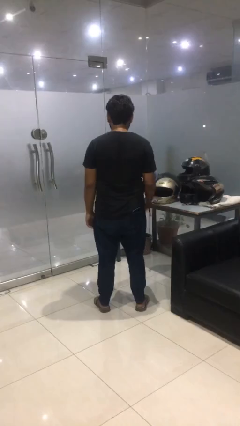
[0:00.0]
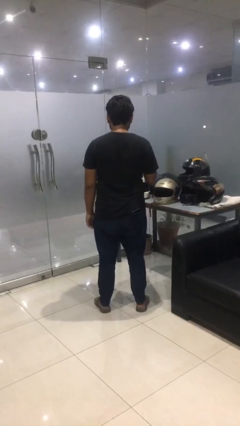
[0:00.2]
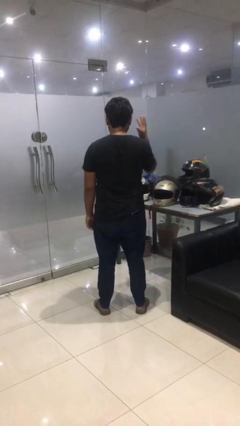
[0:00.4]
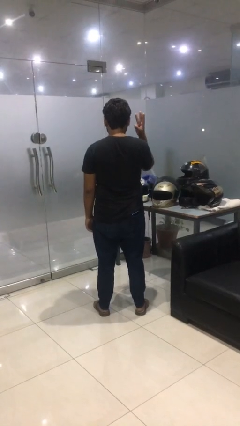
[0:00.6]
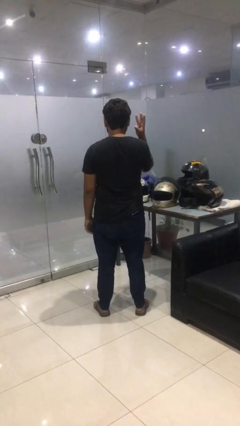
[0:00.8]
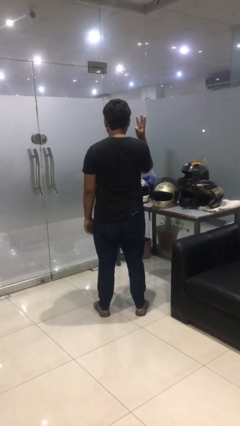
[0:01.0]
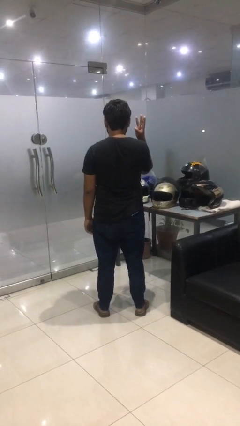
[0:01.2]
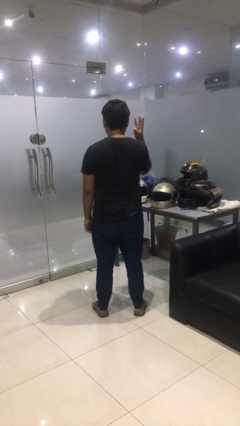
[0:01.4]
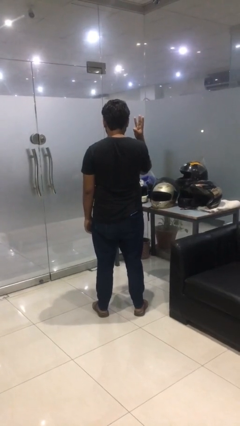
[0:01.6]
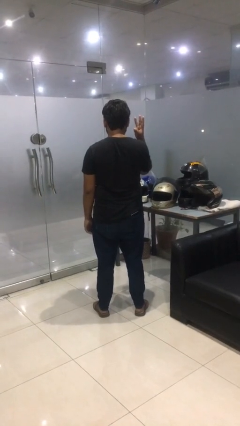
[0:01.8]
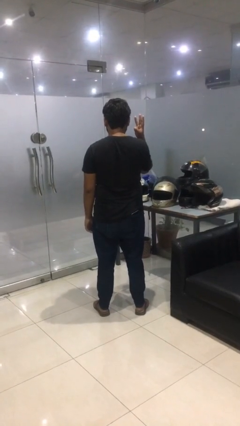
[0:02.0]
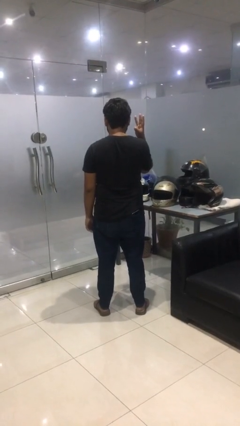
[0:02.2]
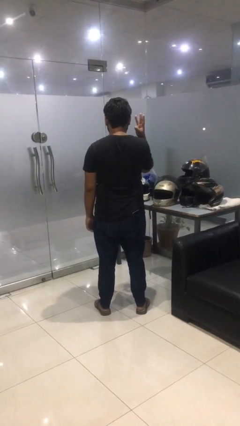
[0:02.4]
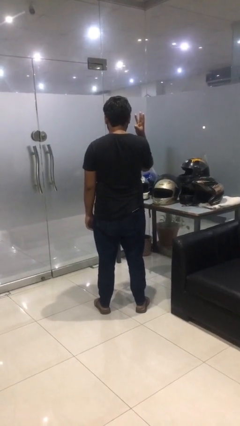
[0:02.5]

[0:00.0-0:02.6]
person gestures number three

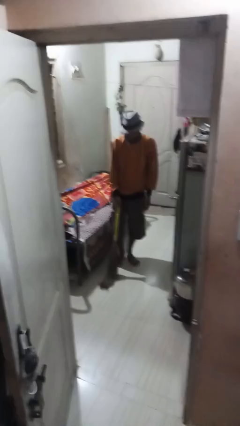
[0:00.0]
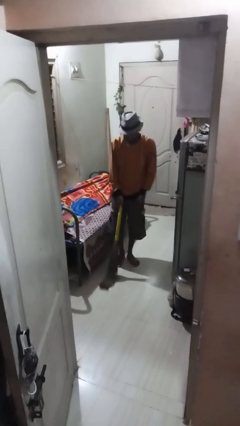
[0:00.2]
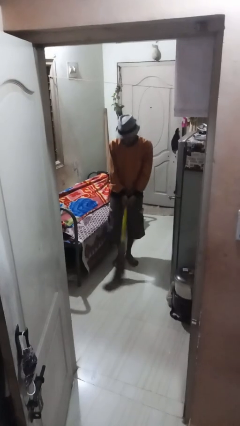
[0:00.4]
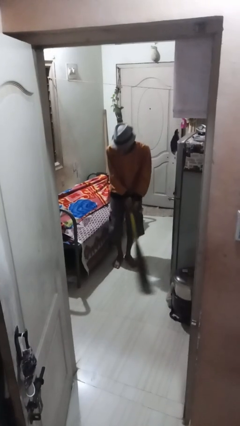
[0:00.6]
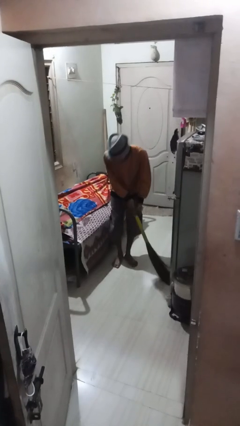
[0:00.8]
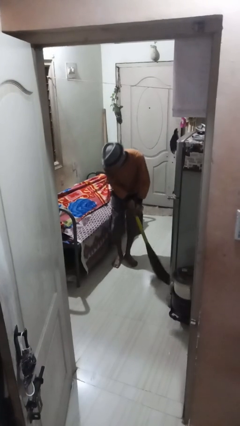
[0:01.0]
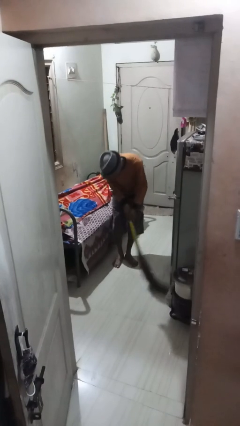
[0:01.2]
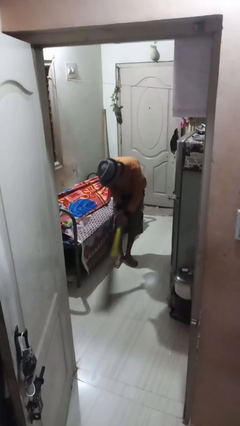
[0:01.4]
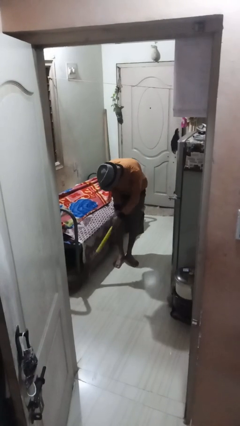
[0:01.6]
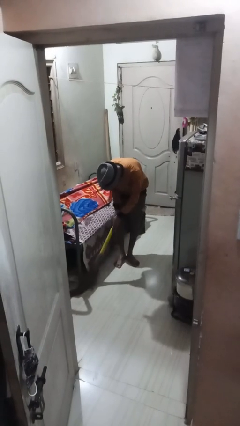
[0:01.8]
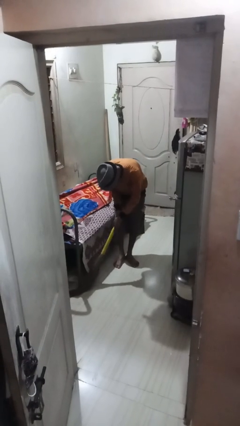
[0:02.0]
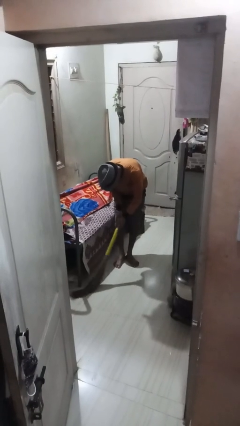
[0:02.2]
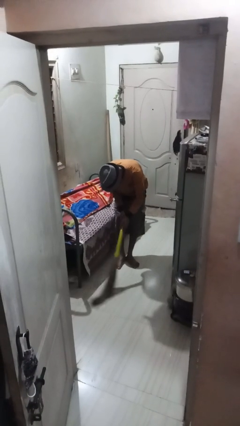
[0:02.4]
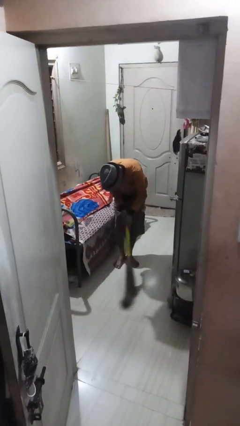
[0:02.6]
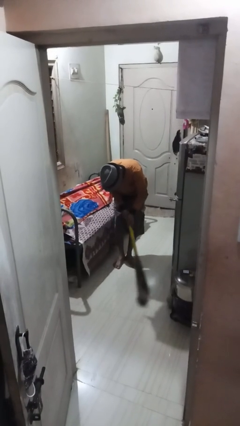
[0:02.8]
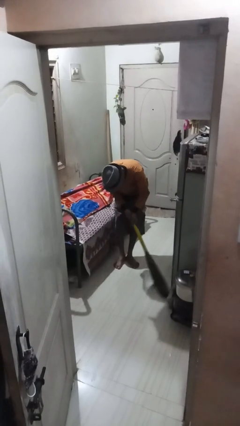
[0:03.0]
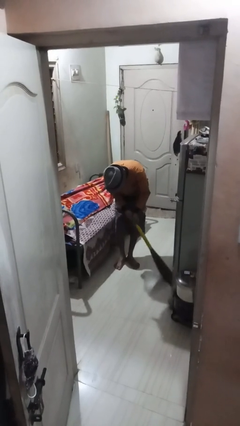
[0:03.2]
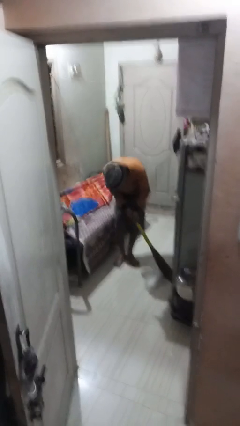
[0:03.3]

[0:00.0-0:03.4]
person sweeps floor

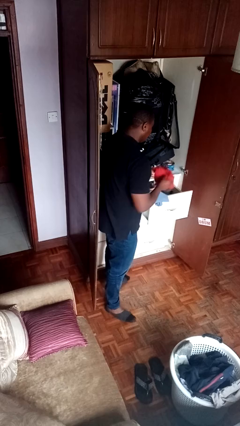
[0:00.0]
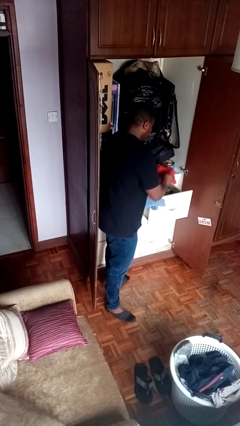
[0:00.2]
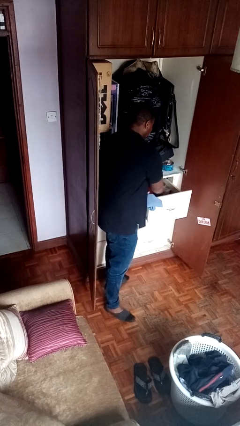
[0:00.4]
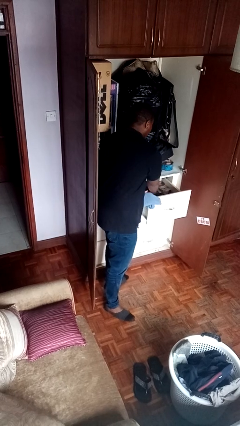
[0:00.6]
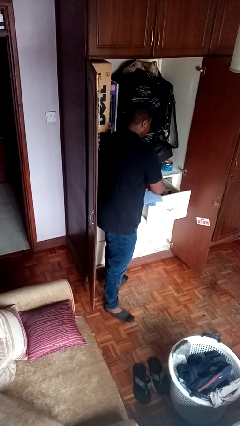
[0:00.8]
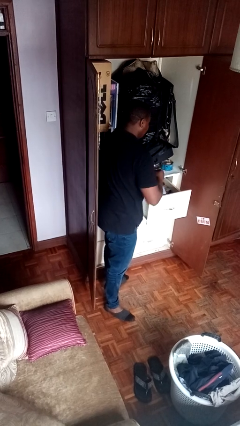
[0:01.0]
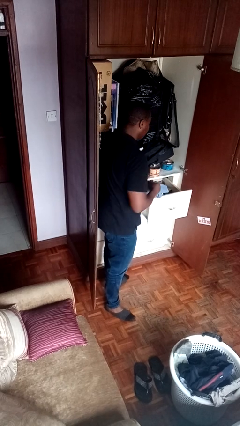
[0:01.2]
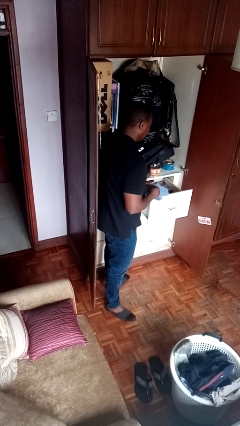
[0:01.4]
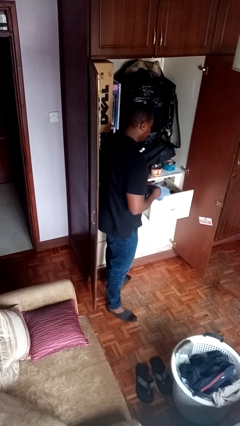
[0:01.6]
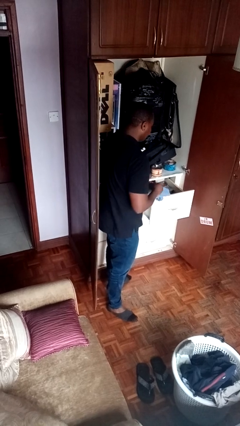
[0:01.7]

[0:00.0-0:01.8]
person puts clothes into dresser

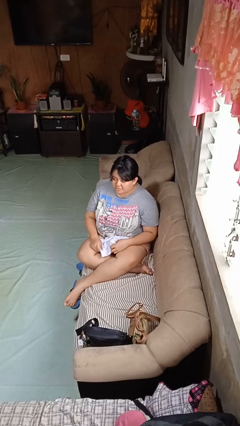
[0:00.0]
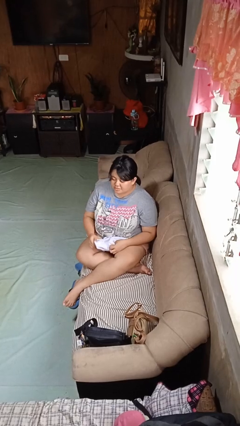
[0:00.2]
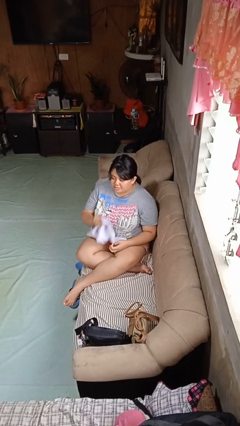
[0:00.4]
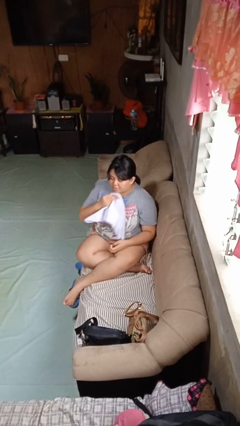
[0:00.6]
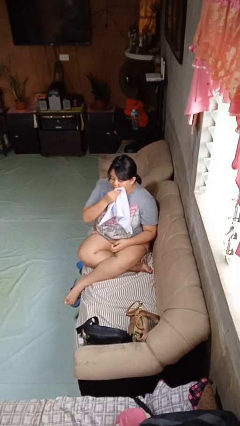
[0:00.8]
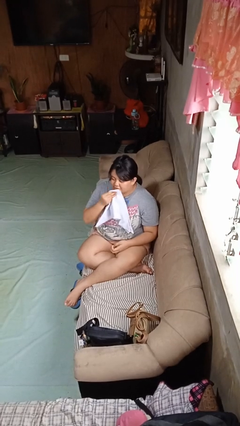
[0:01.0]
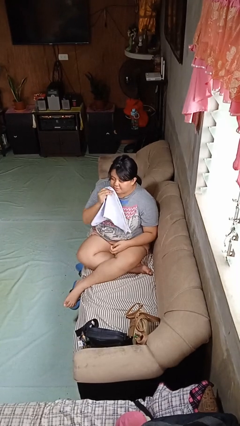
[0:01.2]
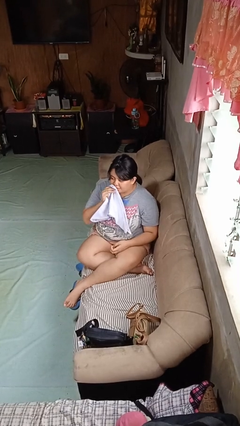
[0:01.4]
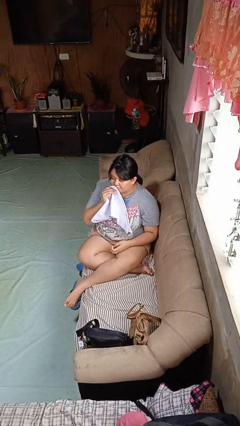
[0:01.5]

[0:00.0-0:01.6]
person wipes mouth with napkin

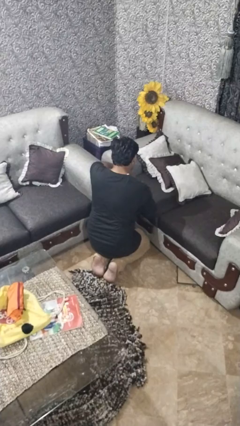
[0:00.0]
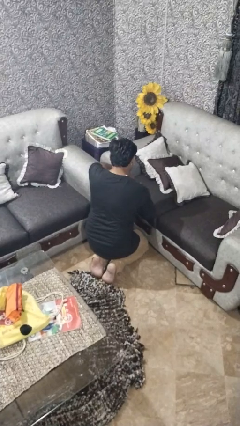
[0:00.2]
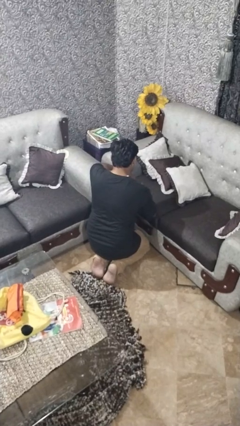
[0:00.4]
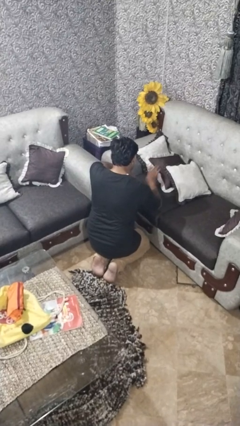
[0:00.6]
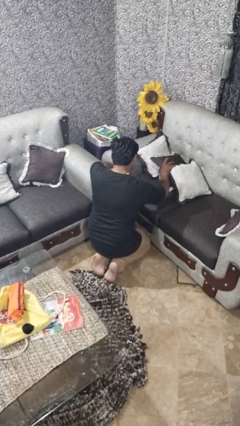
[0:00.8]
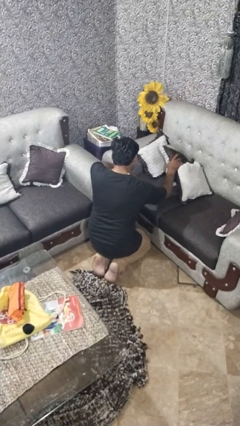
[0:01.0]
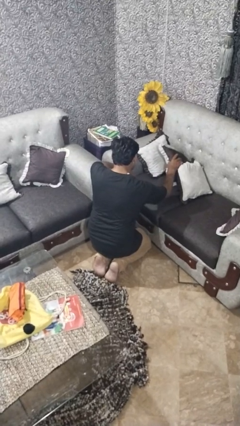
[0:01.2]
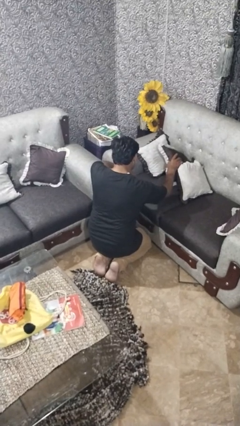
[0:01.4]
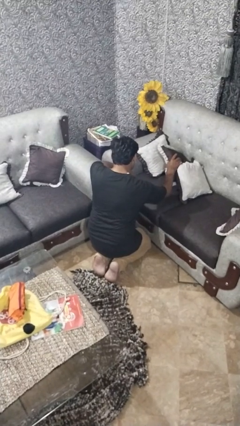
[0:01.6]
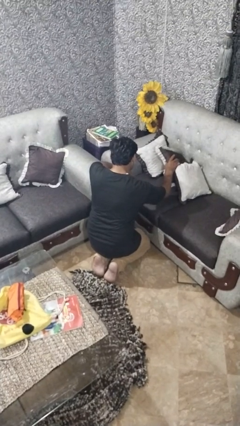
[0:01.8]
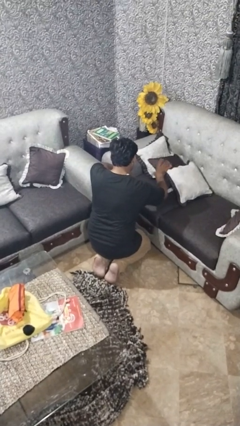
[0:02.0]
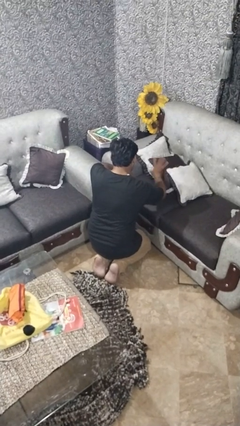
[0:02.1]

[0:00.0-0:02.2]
person searches in couch

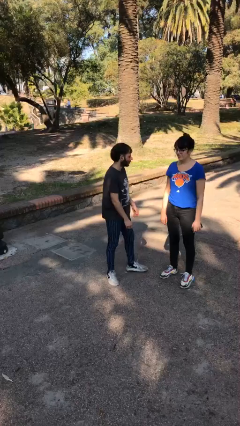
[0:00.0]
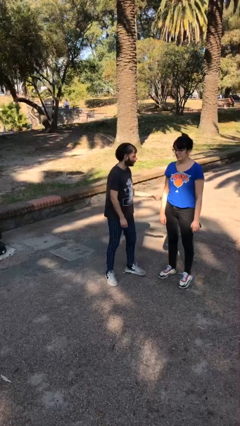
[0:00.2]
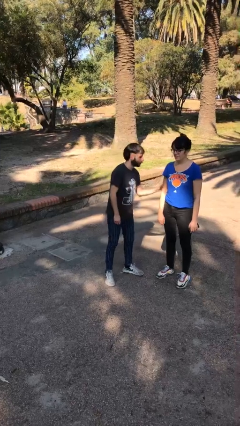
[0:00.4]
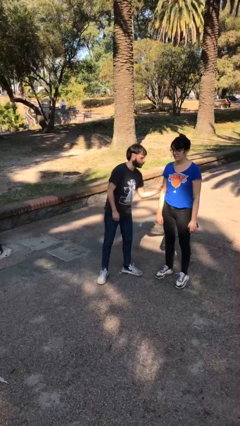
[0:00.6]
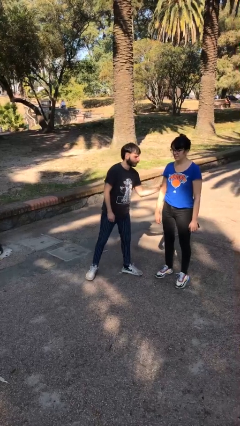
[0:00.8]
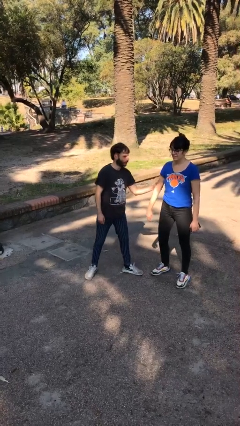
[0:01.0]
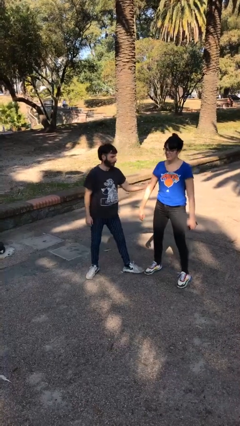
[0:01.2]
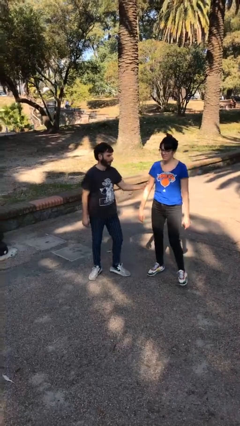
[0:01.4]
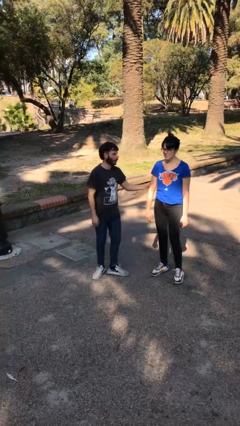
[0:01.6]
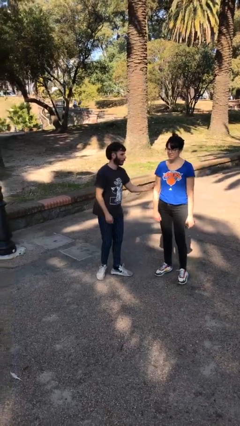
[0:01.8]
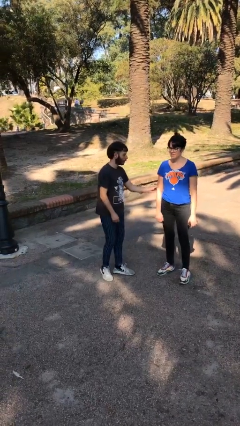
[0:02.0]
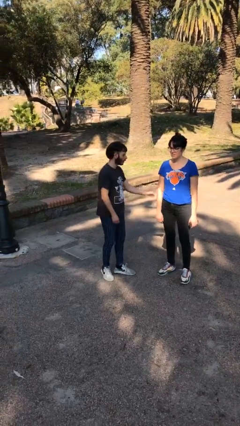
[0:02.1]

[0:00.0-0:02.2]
person grabs person by bicep

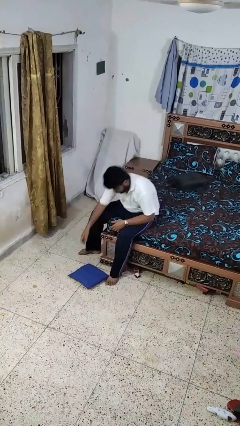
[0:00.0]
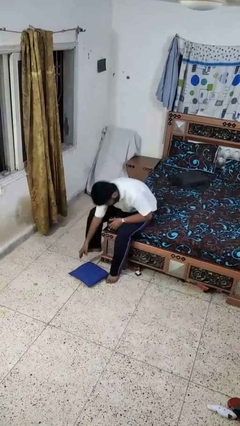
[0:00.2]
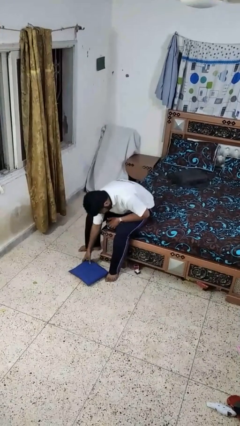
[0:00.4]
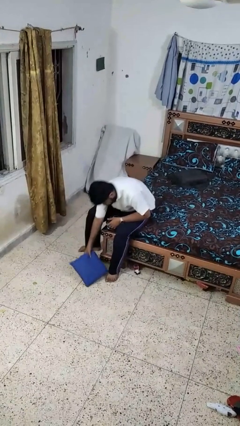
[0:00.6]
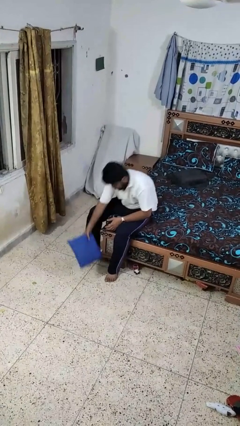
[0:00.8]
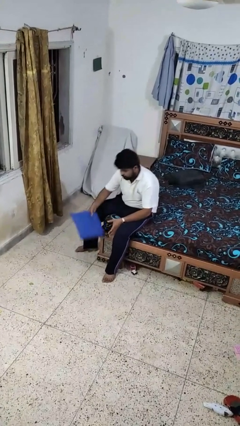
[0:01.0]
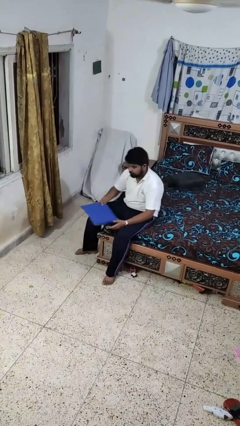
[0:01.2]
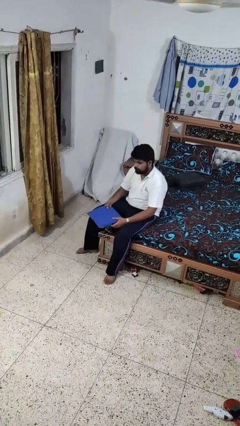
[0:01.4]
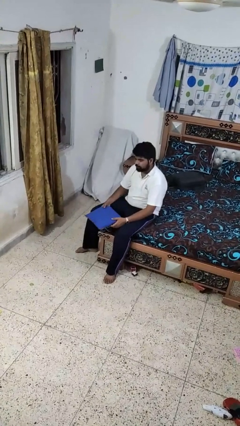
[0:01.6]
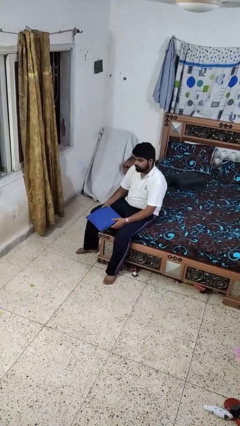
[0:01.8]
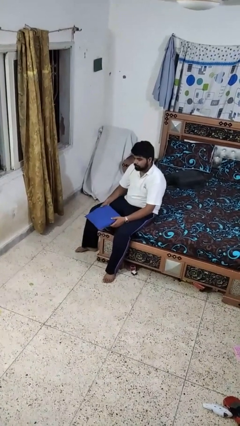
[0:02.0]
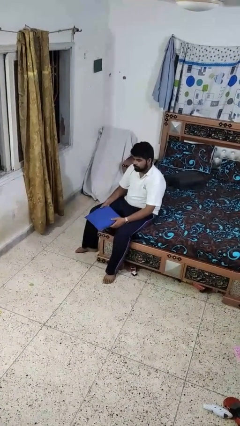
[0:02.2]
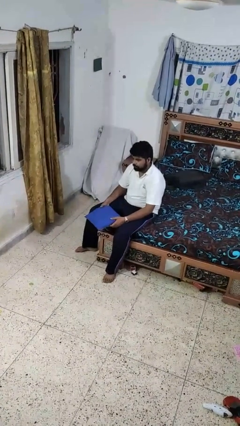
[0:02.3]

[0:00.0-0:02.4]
person picks up object from floor

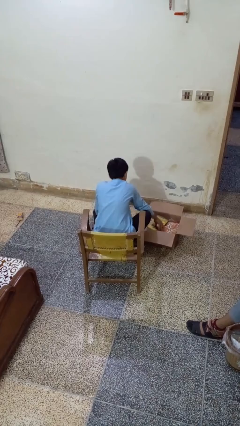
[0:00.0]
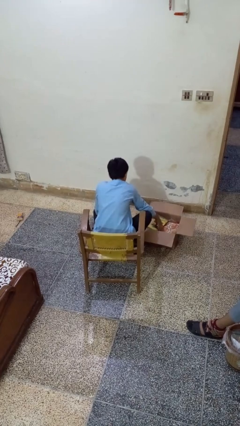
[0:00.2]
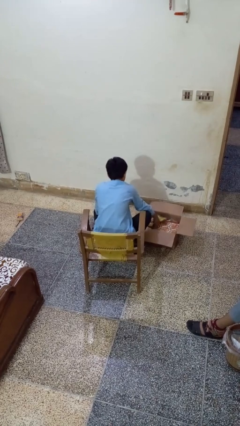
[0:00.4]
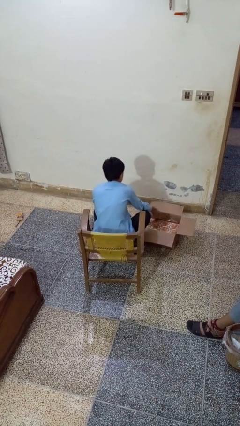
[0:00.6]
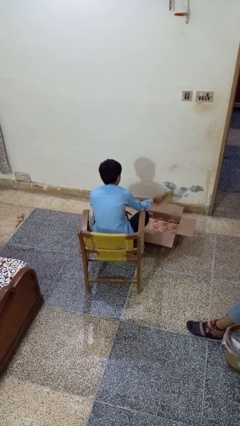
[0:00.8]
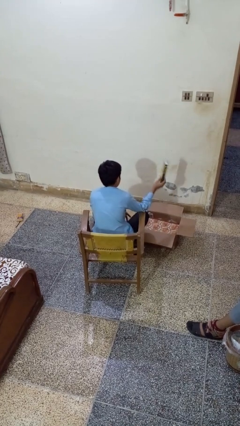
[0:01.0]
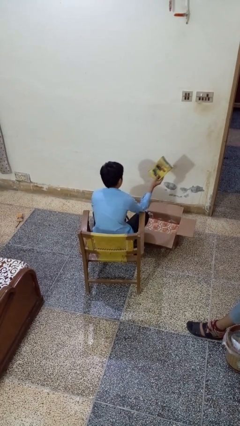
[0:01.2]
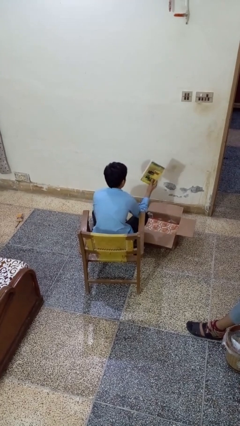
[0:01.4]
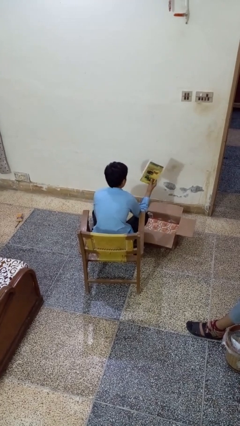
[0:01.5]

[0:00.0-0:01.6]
person takes object from box
